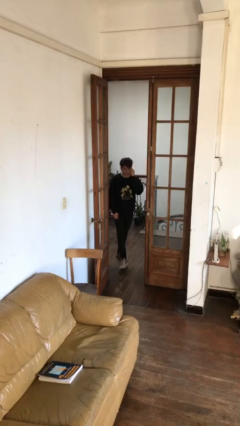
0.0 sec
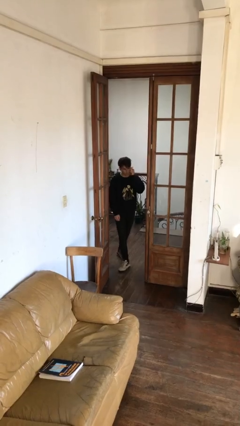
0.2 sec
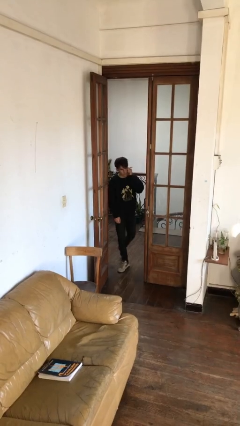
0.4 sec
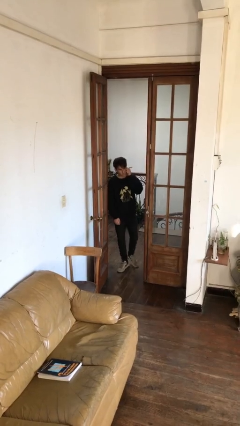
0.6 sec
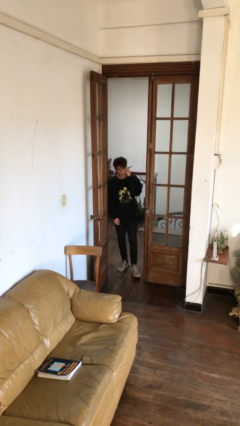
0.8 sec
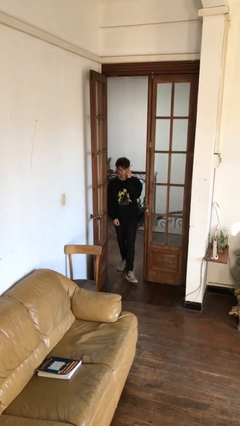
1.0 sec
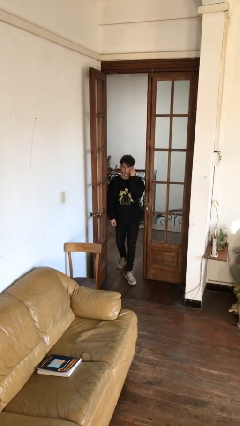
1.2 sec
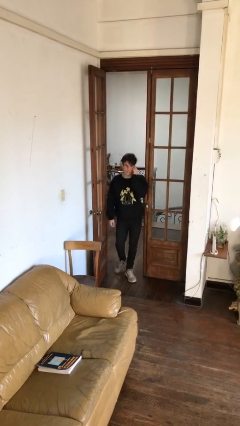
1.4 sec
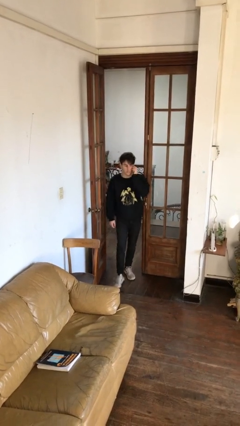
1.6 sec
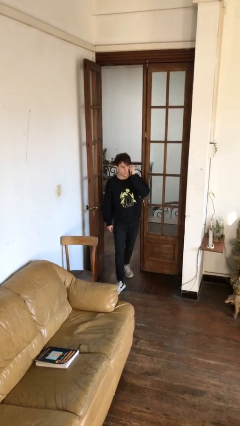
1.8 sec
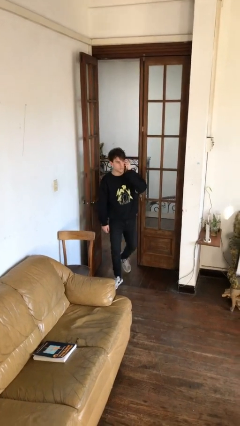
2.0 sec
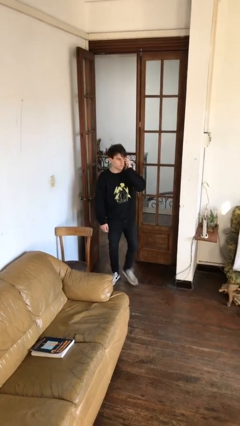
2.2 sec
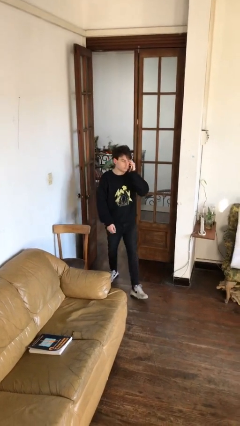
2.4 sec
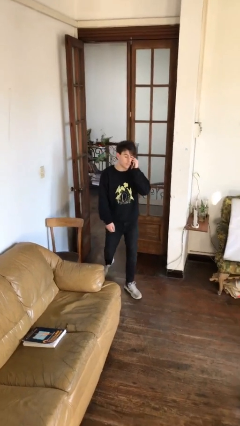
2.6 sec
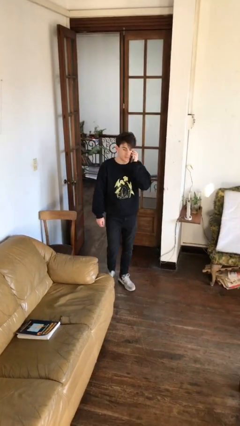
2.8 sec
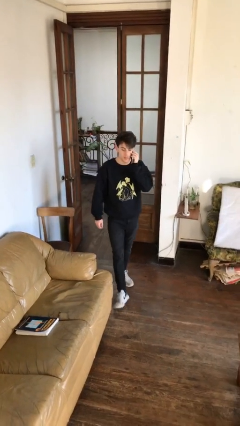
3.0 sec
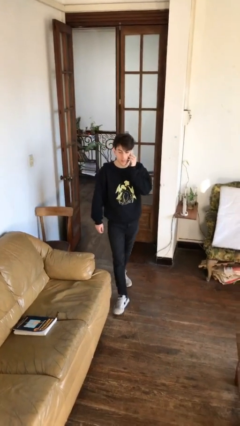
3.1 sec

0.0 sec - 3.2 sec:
person enters scene through structure

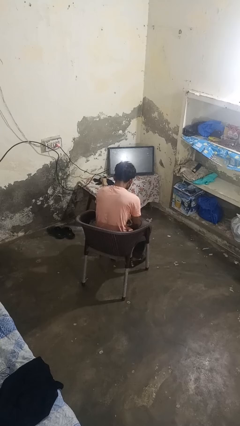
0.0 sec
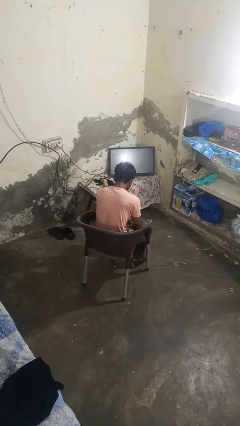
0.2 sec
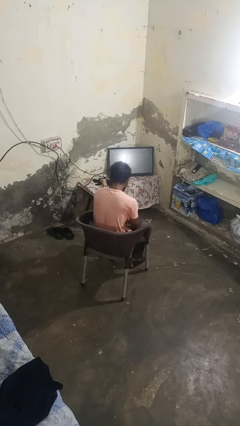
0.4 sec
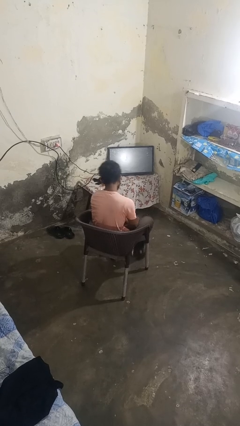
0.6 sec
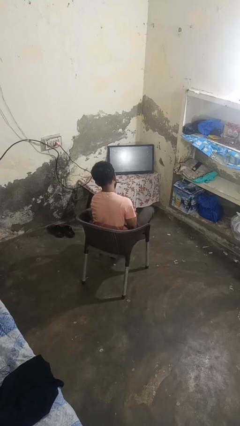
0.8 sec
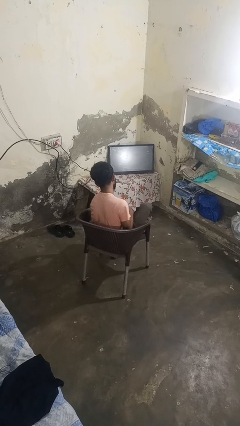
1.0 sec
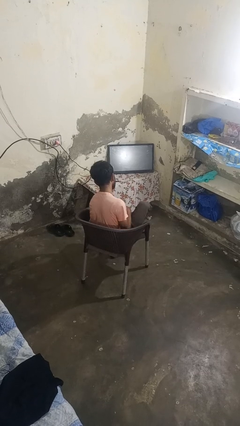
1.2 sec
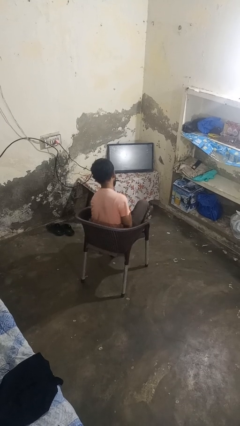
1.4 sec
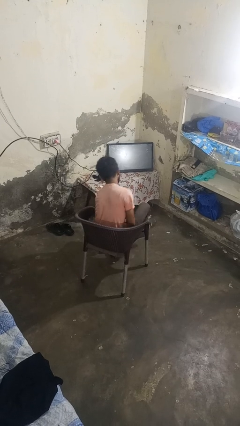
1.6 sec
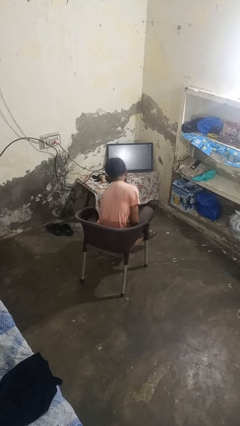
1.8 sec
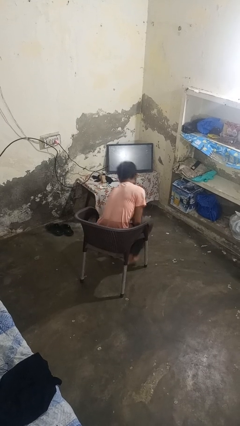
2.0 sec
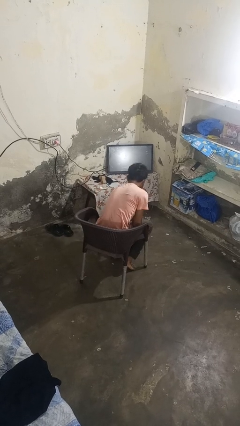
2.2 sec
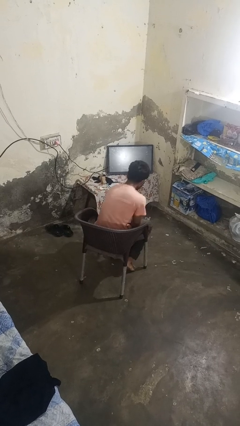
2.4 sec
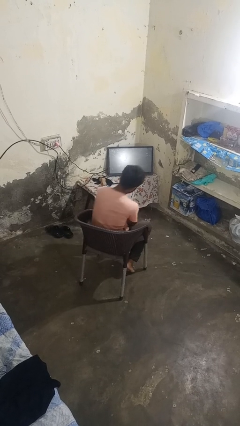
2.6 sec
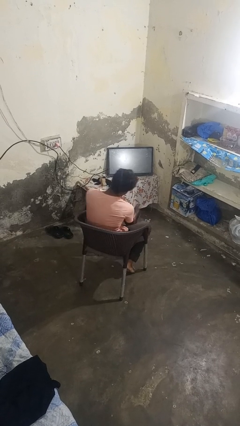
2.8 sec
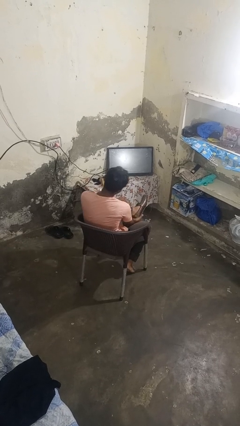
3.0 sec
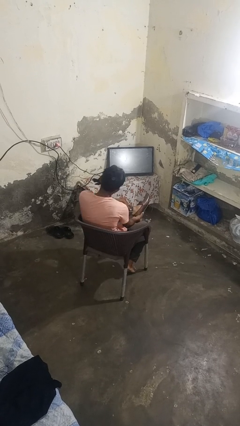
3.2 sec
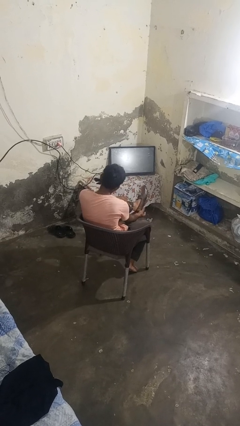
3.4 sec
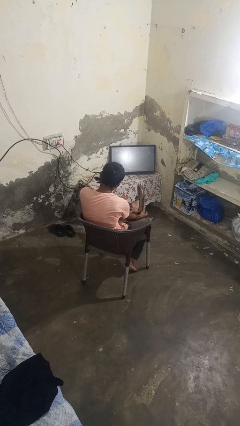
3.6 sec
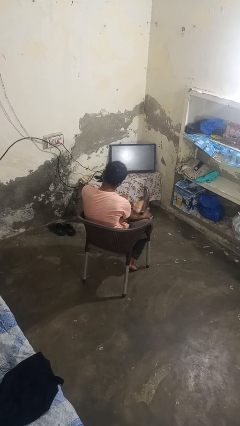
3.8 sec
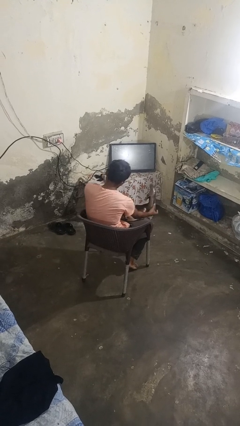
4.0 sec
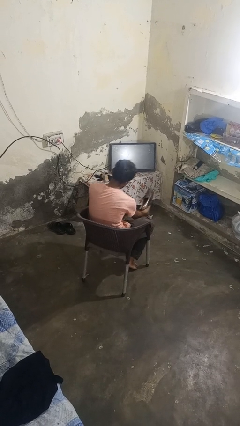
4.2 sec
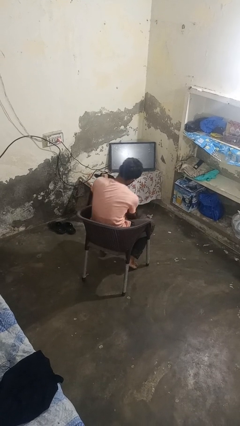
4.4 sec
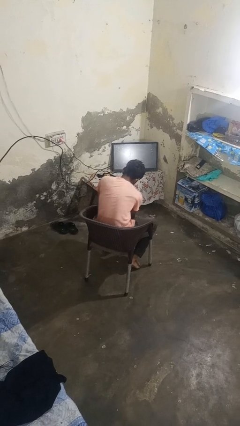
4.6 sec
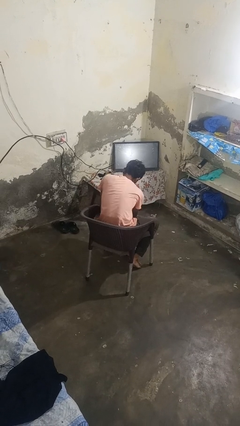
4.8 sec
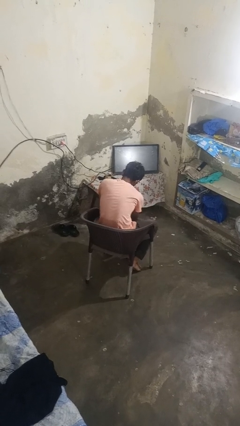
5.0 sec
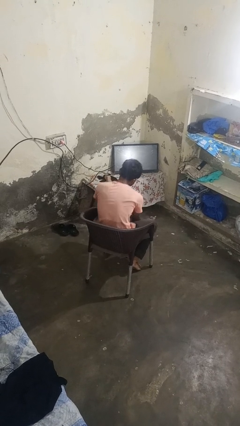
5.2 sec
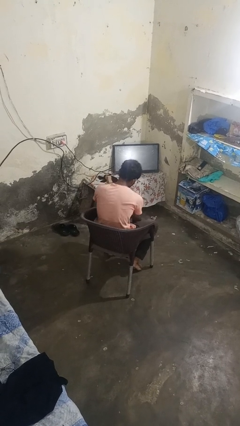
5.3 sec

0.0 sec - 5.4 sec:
person takes off shoes

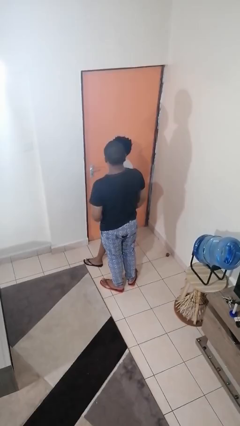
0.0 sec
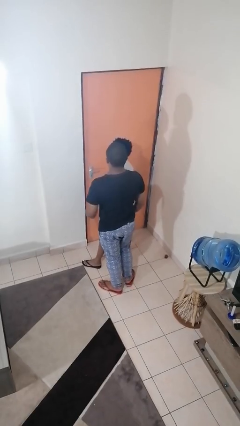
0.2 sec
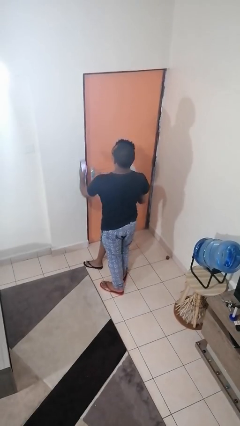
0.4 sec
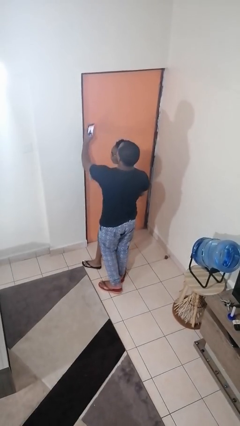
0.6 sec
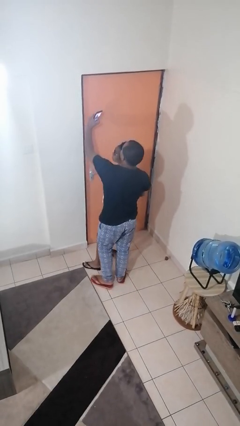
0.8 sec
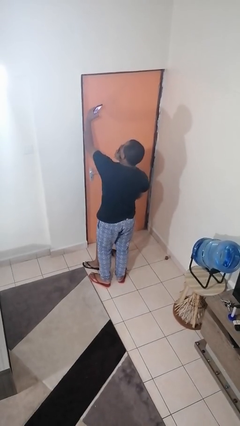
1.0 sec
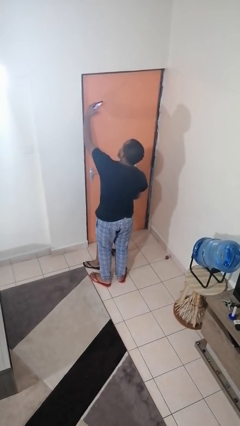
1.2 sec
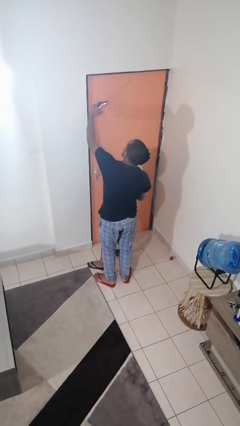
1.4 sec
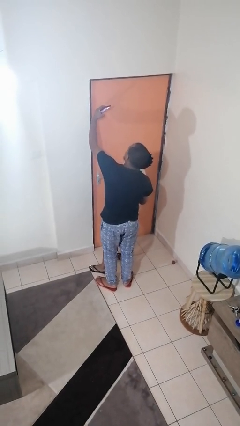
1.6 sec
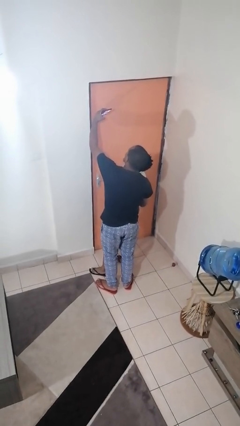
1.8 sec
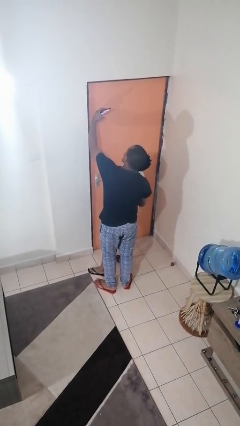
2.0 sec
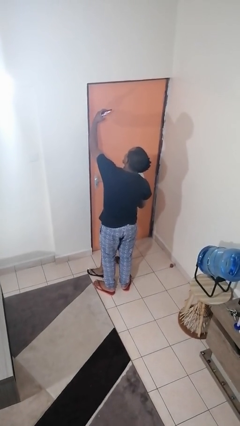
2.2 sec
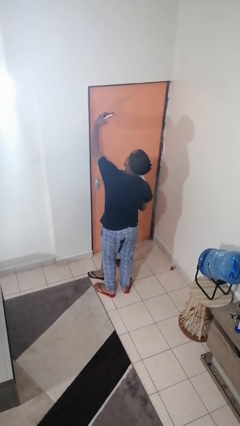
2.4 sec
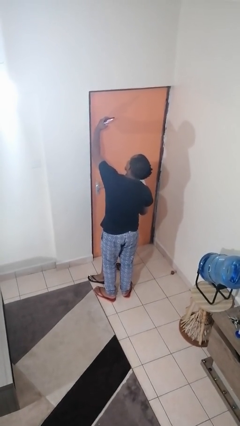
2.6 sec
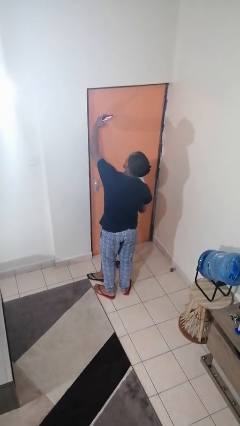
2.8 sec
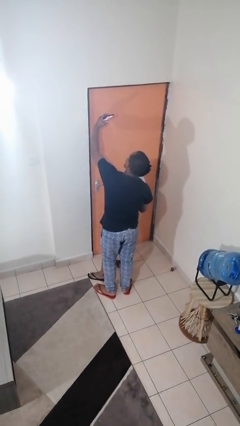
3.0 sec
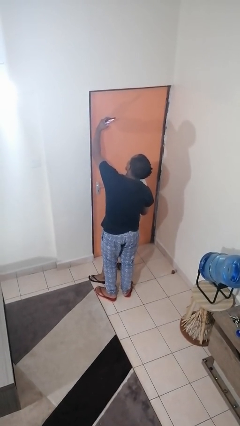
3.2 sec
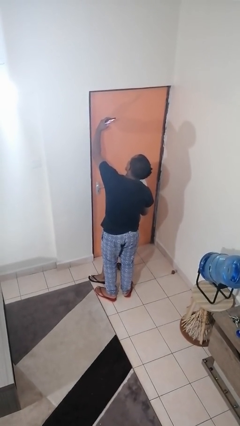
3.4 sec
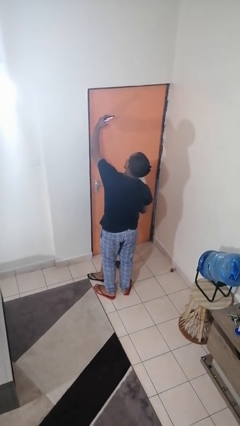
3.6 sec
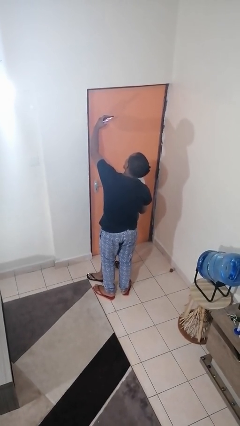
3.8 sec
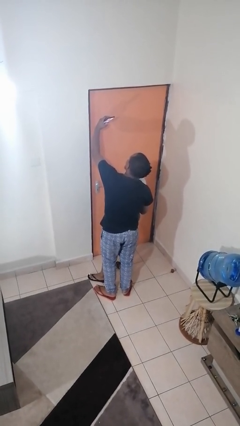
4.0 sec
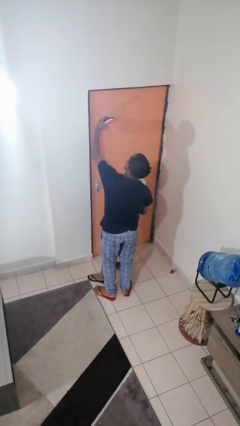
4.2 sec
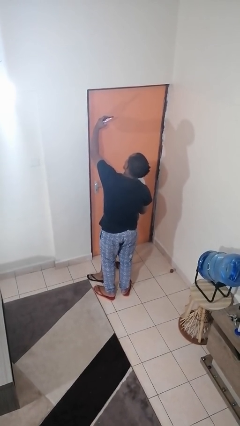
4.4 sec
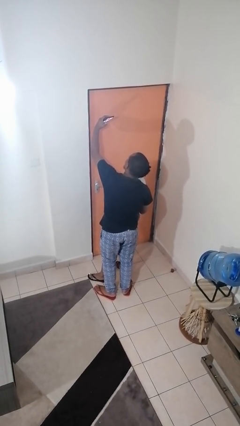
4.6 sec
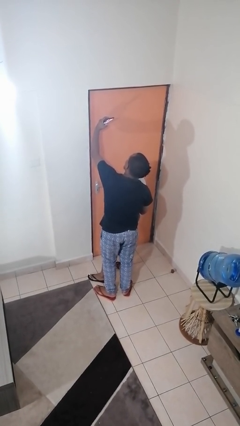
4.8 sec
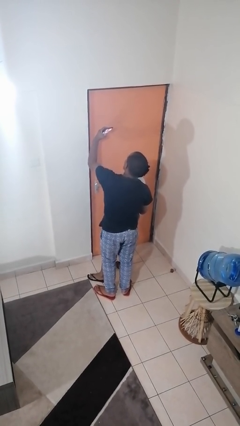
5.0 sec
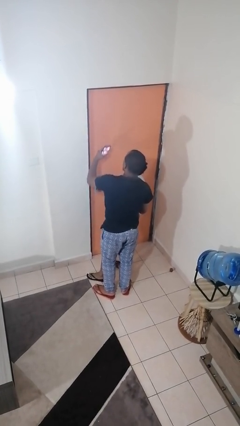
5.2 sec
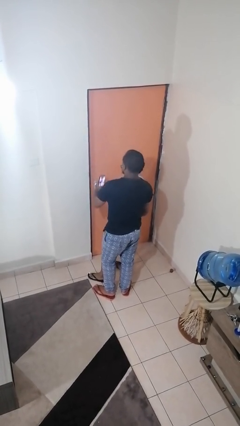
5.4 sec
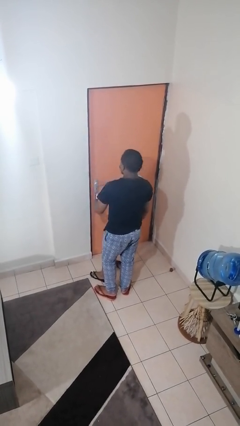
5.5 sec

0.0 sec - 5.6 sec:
person takes selfie with person

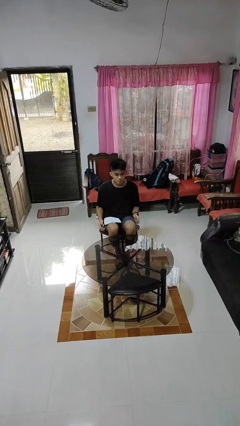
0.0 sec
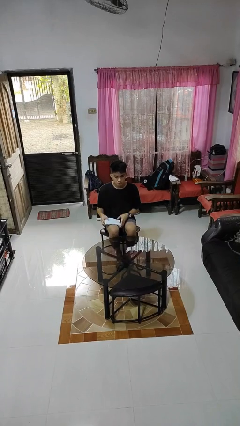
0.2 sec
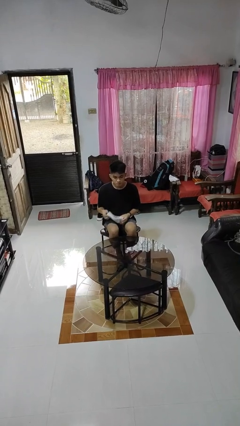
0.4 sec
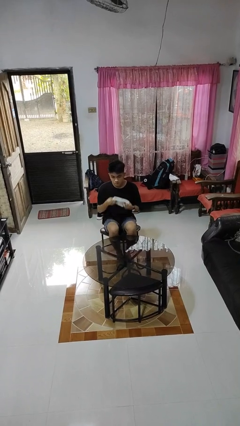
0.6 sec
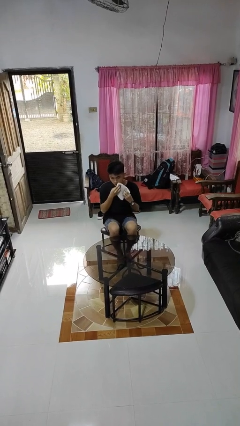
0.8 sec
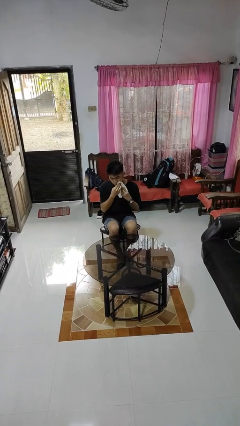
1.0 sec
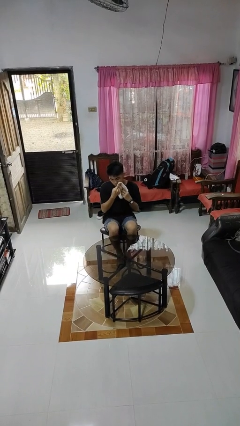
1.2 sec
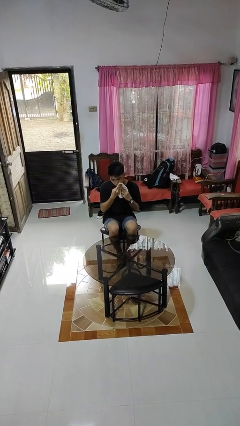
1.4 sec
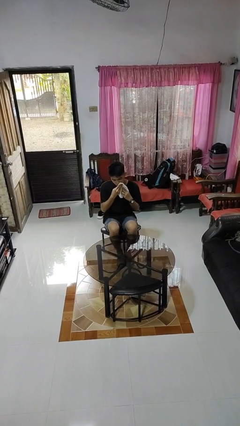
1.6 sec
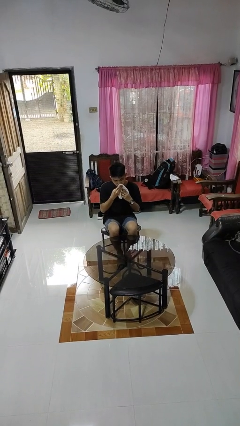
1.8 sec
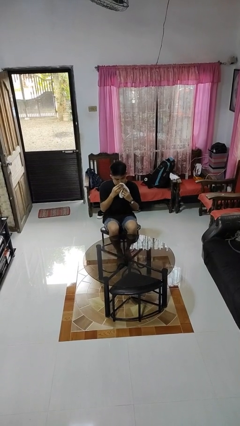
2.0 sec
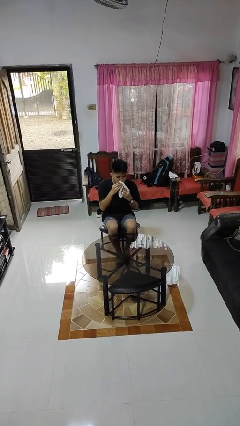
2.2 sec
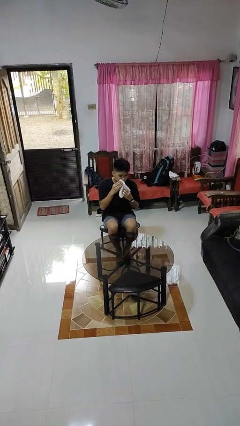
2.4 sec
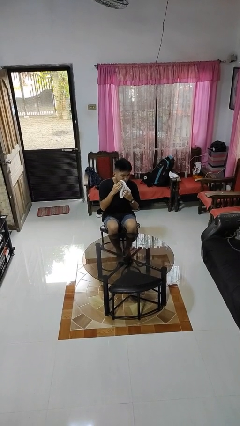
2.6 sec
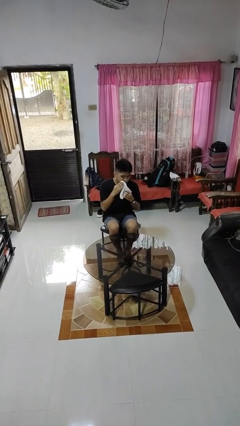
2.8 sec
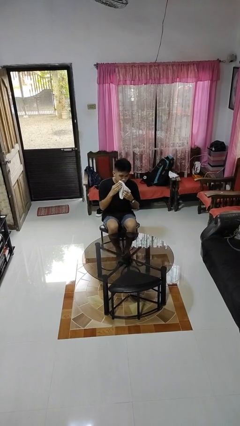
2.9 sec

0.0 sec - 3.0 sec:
person wipes mouth with napkin

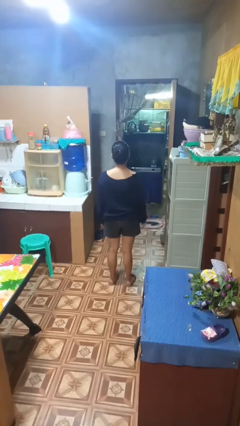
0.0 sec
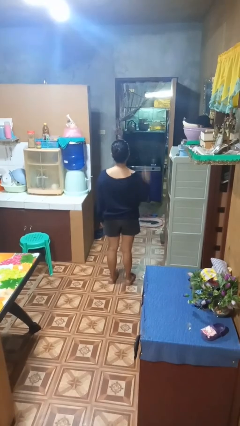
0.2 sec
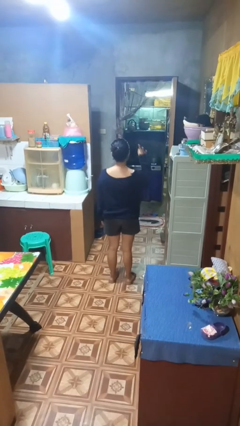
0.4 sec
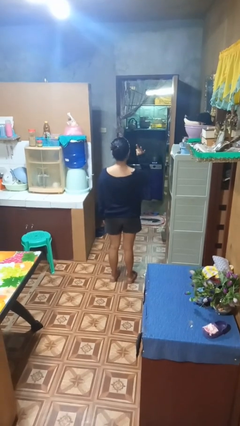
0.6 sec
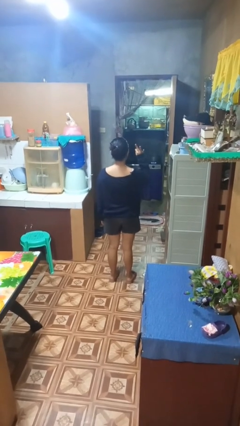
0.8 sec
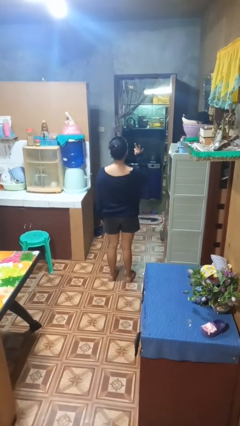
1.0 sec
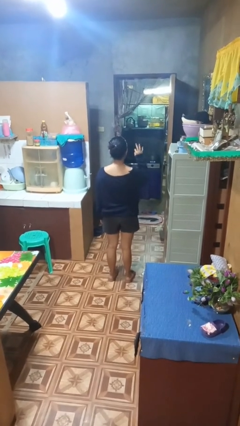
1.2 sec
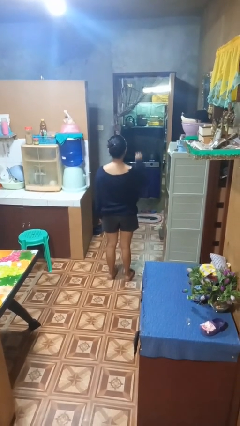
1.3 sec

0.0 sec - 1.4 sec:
person gestures number three
